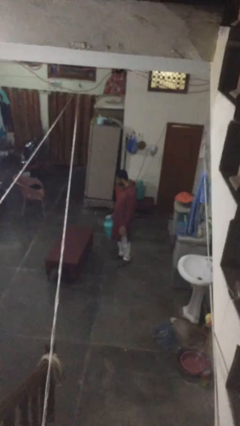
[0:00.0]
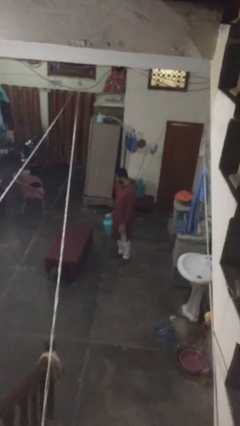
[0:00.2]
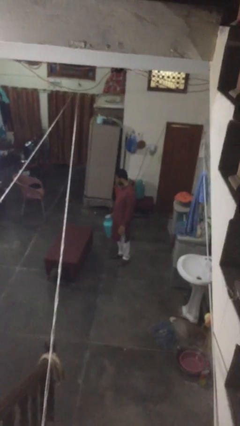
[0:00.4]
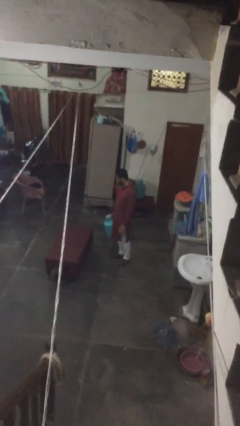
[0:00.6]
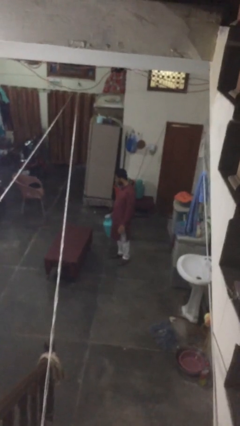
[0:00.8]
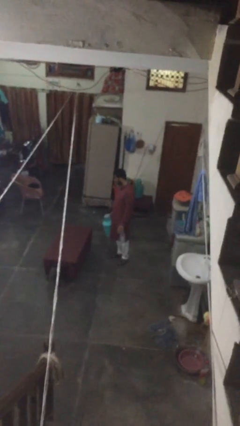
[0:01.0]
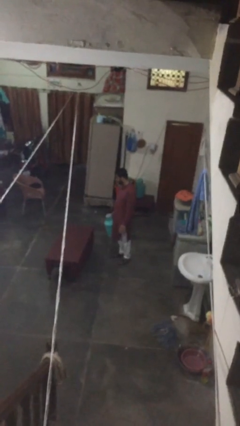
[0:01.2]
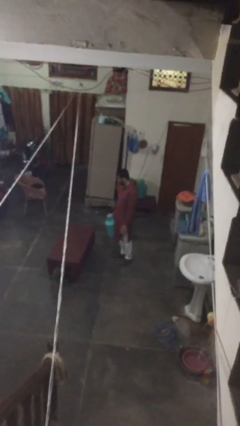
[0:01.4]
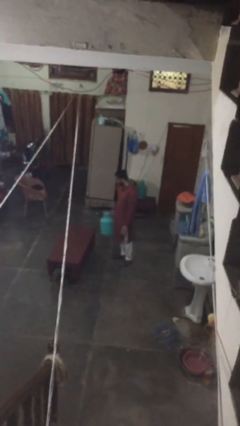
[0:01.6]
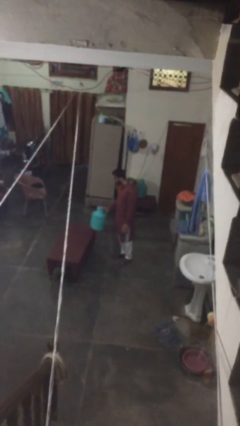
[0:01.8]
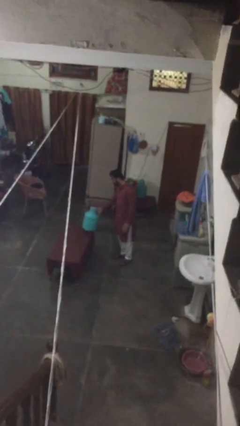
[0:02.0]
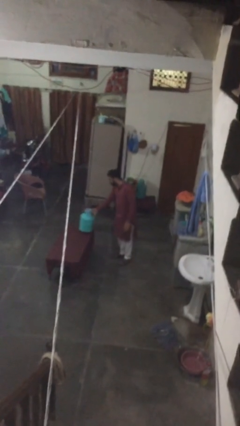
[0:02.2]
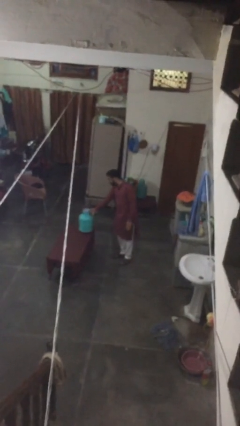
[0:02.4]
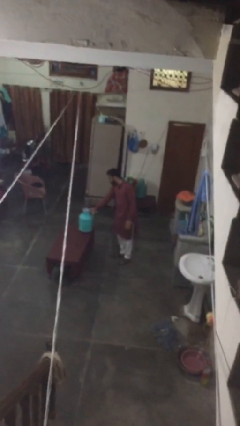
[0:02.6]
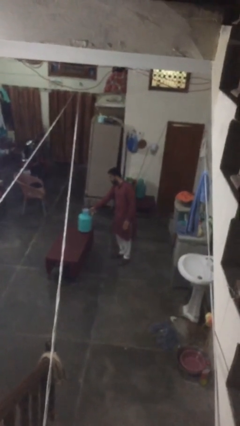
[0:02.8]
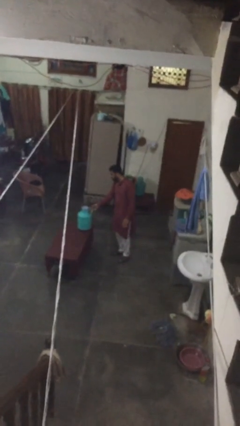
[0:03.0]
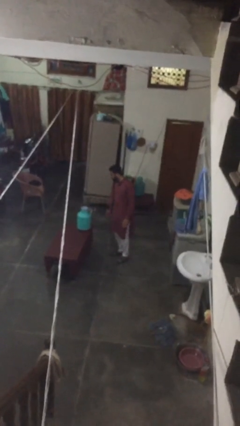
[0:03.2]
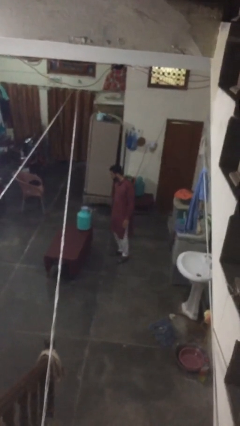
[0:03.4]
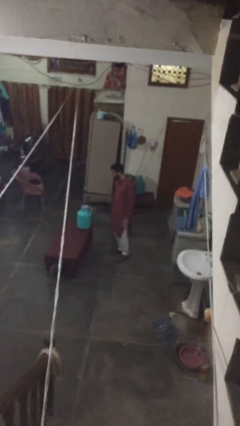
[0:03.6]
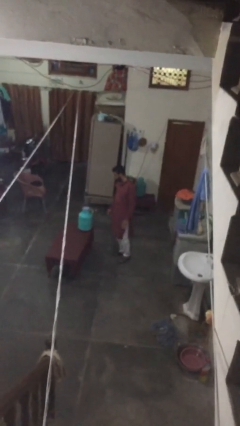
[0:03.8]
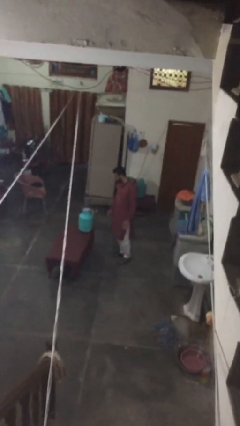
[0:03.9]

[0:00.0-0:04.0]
person puts down object on table

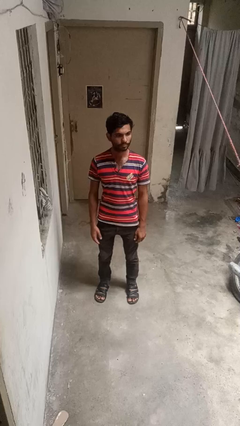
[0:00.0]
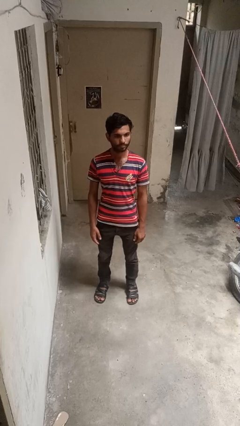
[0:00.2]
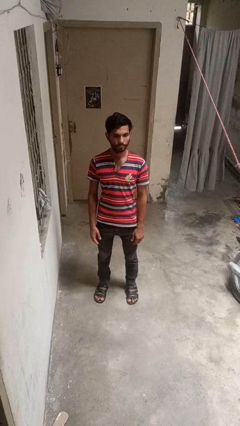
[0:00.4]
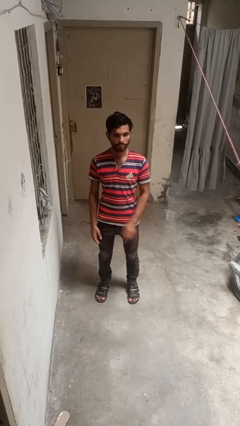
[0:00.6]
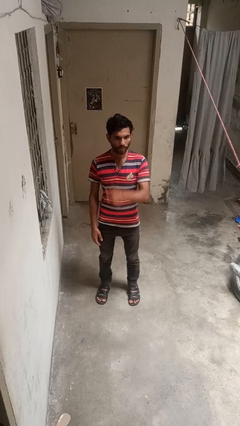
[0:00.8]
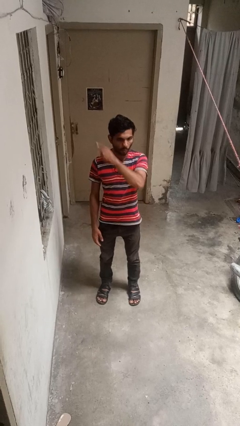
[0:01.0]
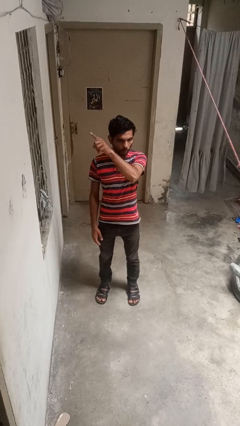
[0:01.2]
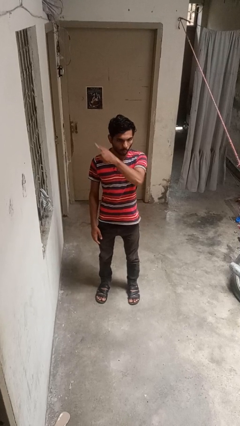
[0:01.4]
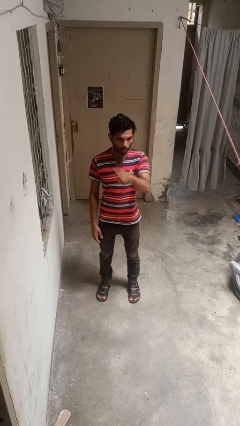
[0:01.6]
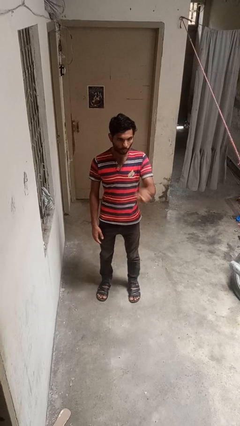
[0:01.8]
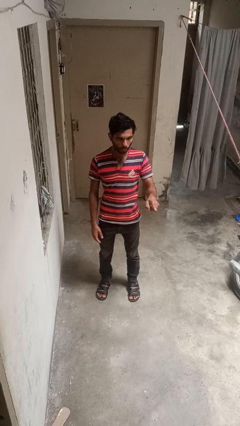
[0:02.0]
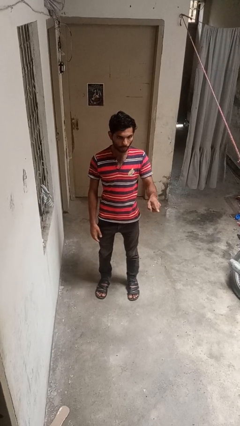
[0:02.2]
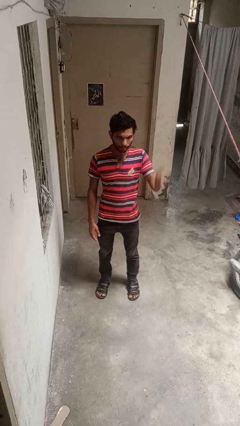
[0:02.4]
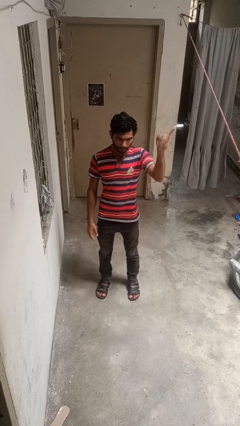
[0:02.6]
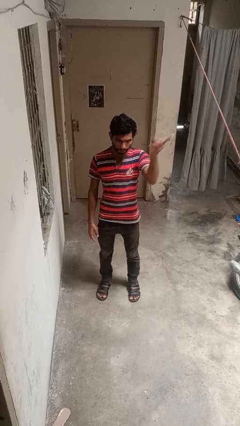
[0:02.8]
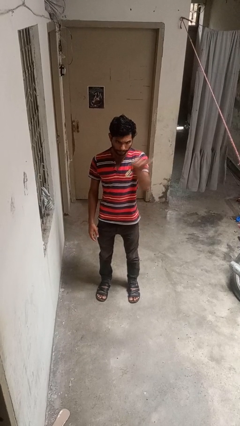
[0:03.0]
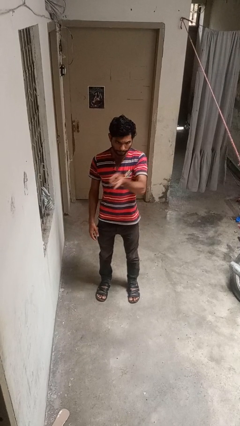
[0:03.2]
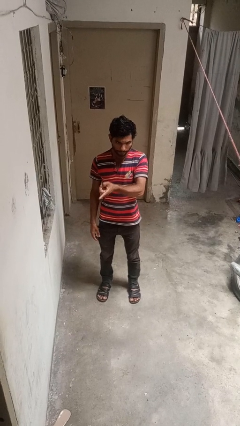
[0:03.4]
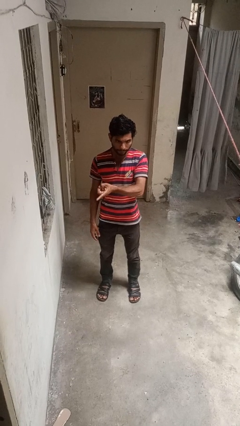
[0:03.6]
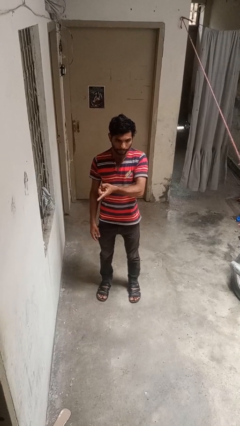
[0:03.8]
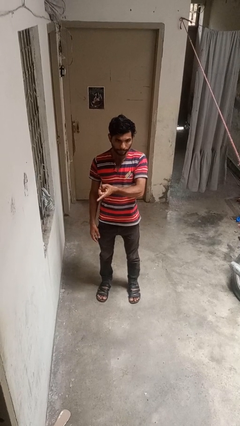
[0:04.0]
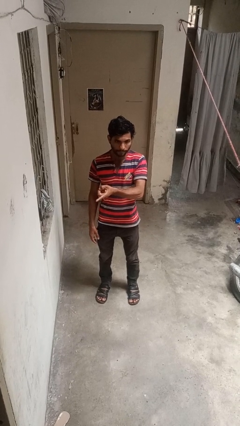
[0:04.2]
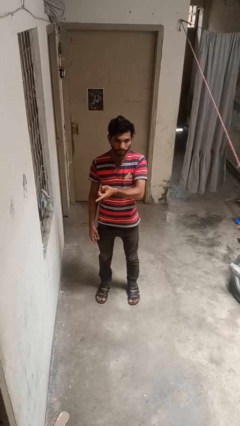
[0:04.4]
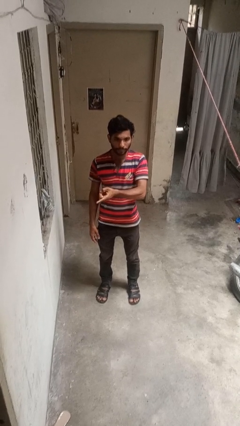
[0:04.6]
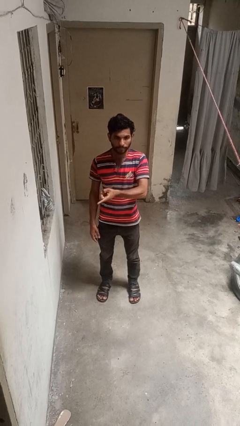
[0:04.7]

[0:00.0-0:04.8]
person gestures cut

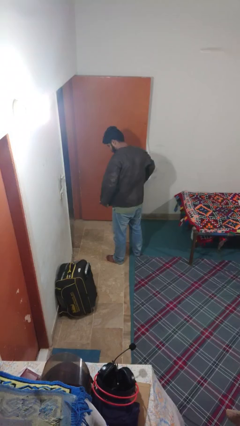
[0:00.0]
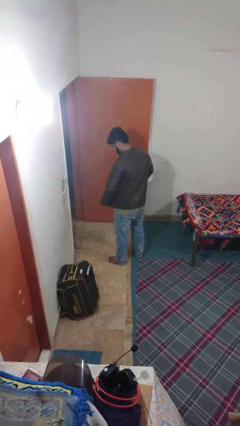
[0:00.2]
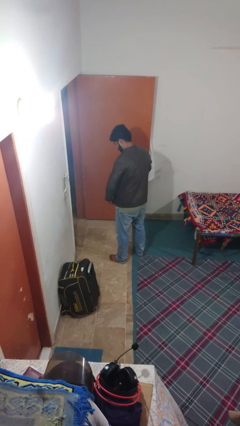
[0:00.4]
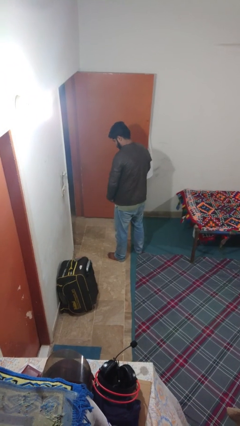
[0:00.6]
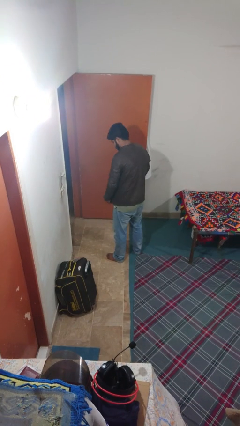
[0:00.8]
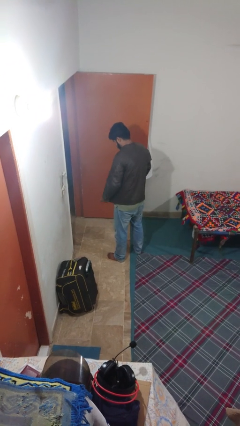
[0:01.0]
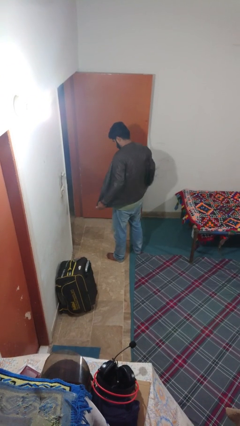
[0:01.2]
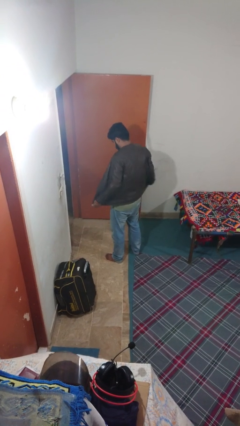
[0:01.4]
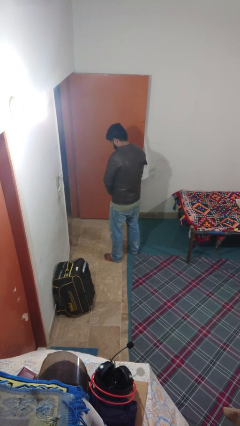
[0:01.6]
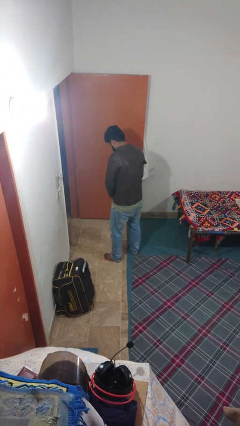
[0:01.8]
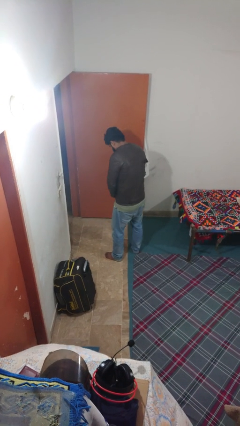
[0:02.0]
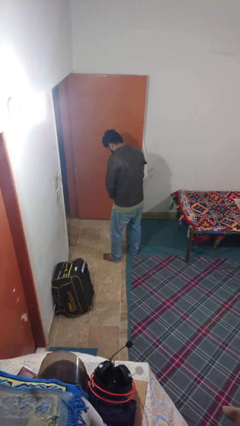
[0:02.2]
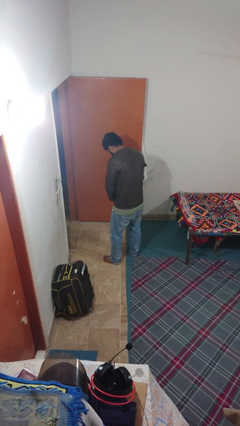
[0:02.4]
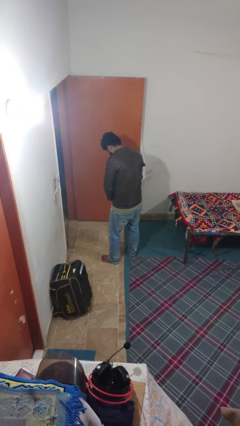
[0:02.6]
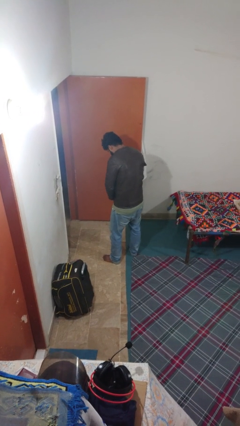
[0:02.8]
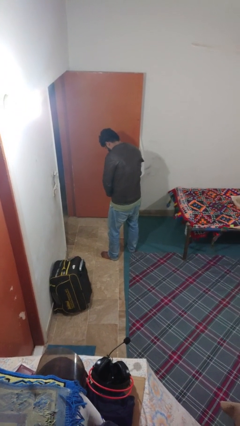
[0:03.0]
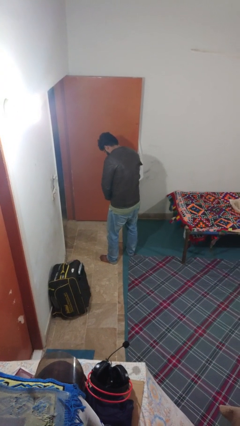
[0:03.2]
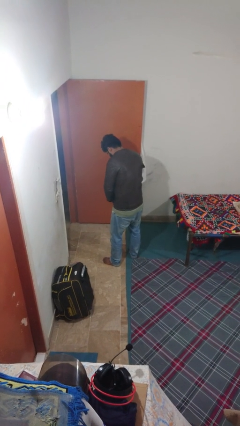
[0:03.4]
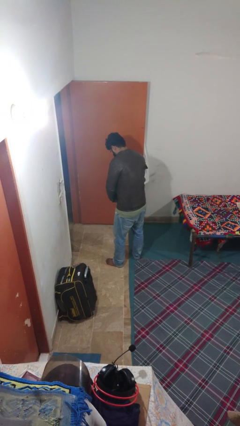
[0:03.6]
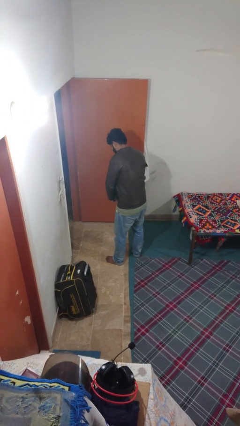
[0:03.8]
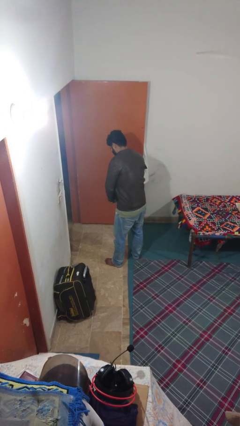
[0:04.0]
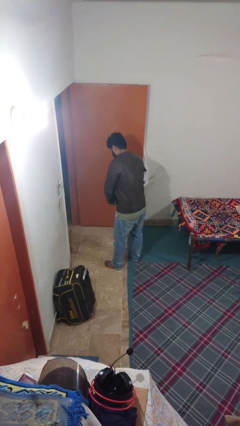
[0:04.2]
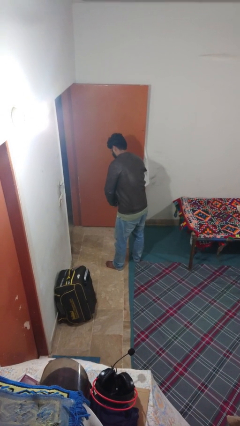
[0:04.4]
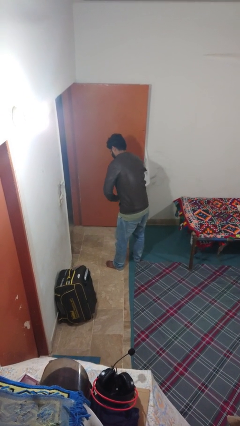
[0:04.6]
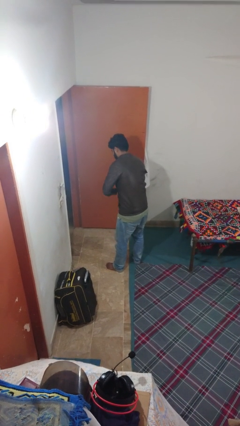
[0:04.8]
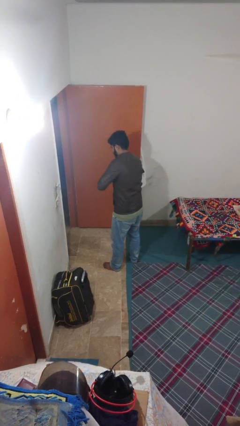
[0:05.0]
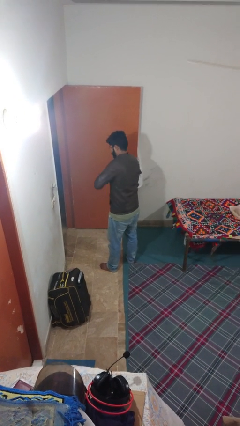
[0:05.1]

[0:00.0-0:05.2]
person zips up jacket

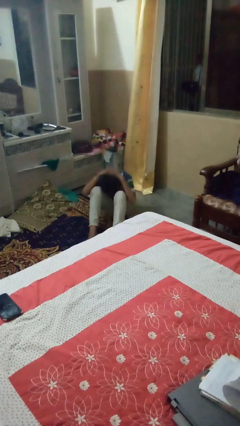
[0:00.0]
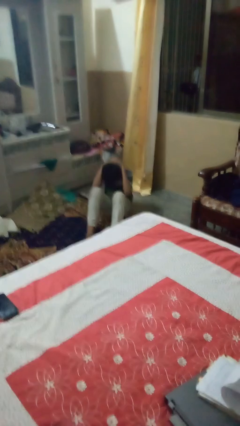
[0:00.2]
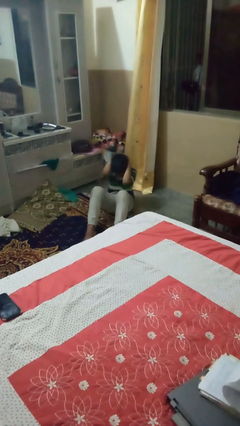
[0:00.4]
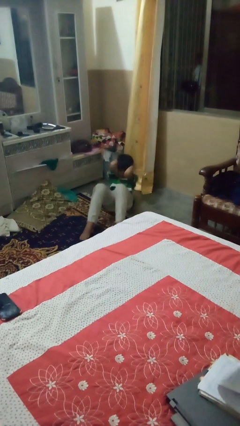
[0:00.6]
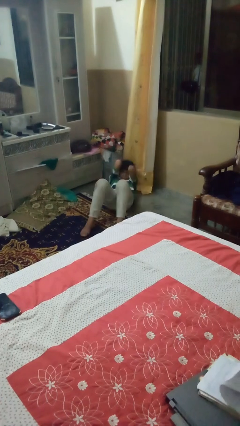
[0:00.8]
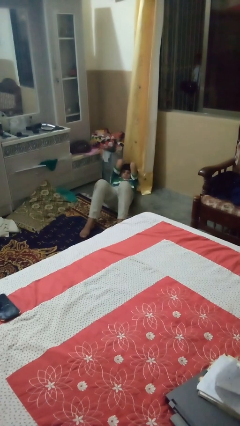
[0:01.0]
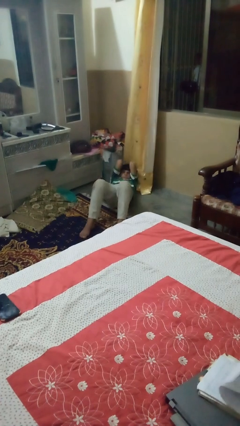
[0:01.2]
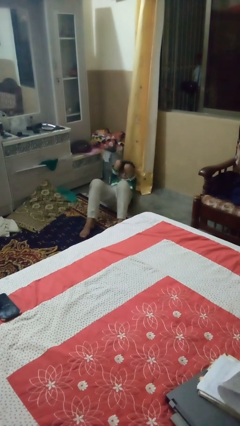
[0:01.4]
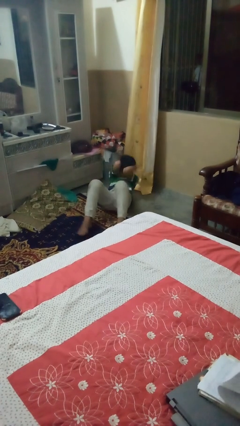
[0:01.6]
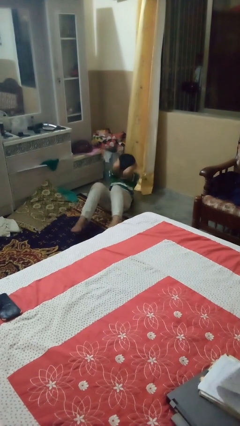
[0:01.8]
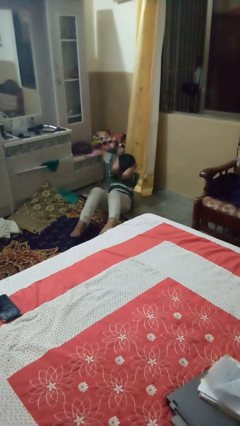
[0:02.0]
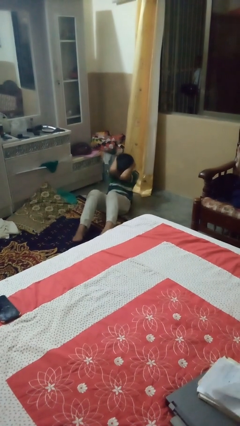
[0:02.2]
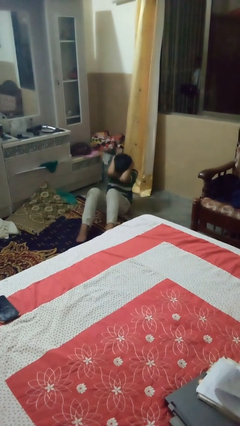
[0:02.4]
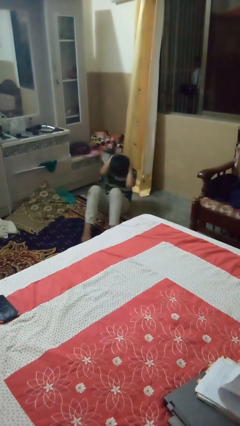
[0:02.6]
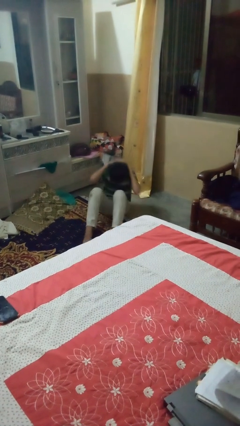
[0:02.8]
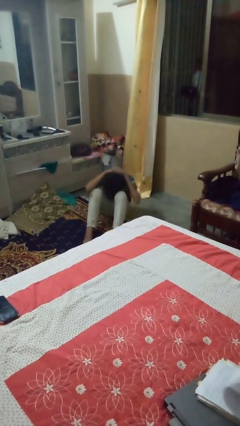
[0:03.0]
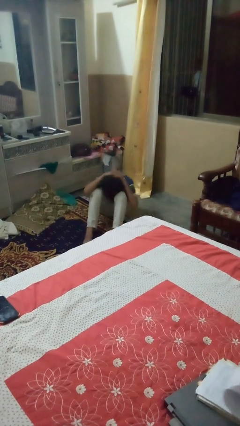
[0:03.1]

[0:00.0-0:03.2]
person exercises with situp

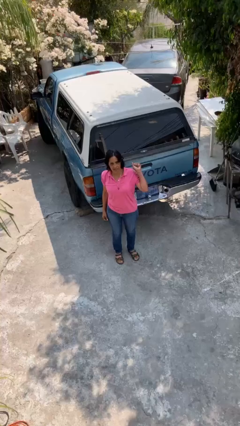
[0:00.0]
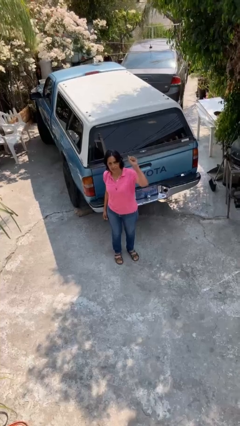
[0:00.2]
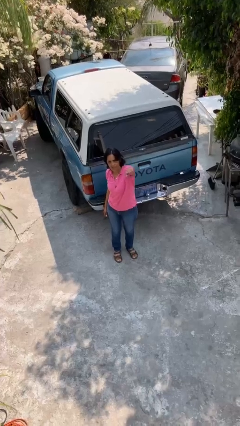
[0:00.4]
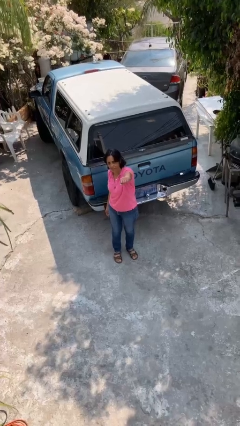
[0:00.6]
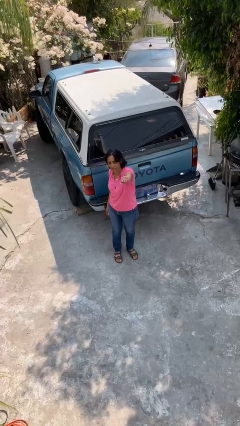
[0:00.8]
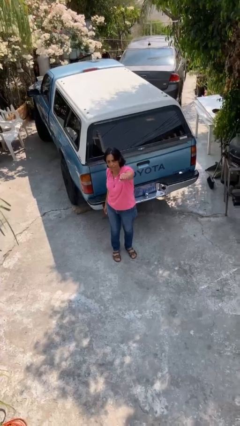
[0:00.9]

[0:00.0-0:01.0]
person karate chop
